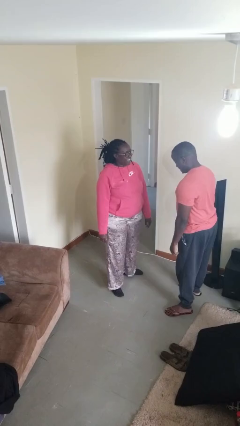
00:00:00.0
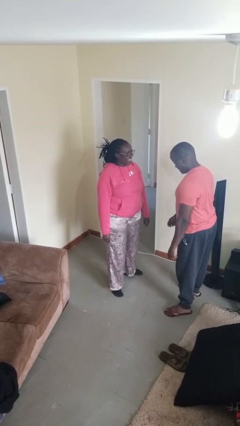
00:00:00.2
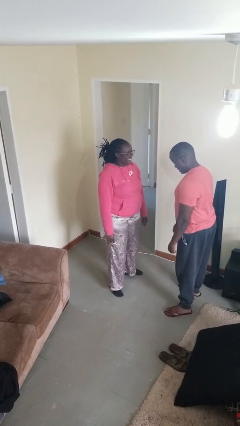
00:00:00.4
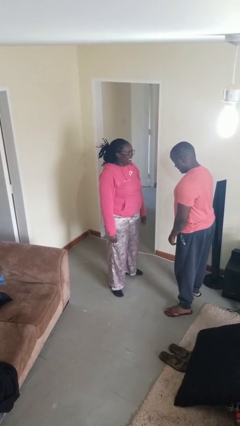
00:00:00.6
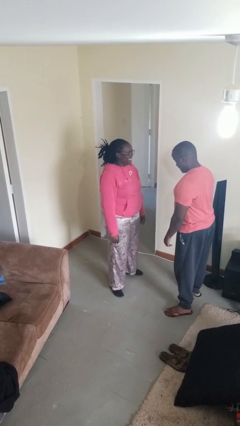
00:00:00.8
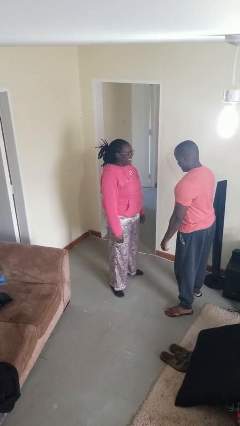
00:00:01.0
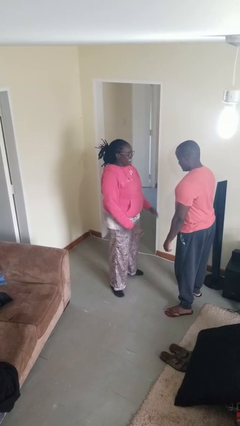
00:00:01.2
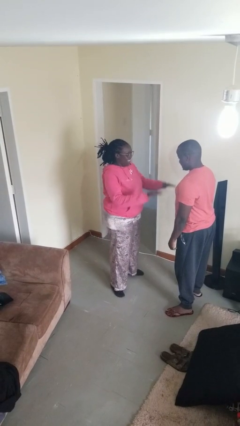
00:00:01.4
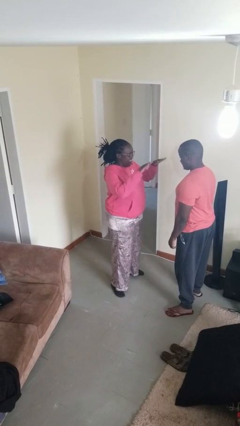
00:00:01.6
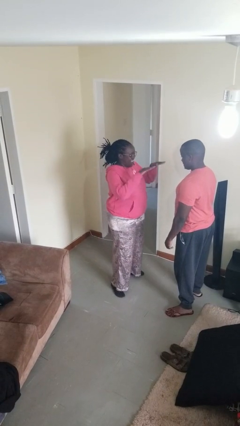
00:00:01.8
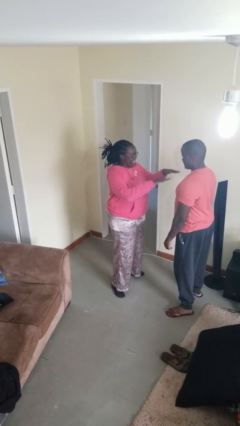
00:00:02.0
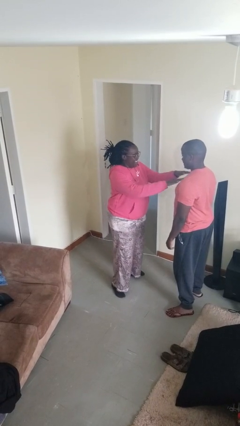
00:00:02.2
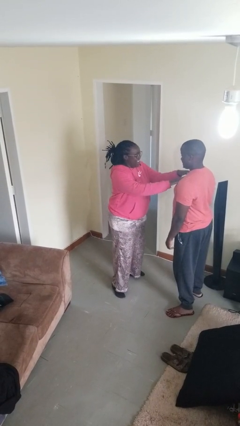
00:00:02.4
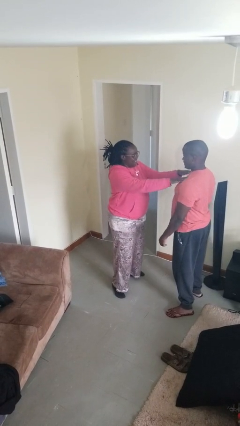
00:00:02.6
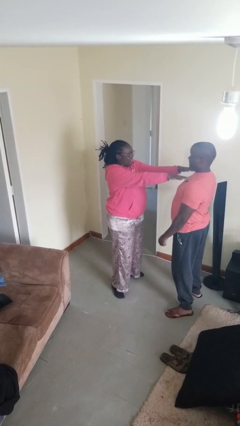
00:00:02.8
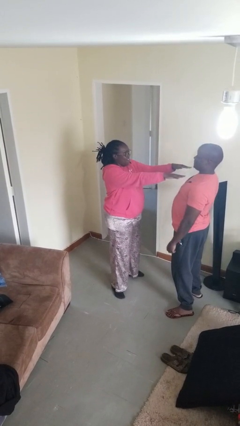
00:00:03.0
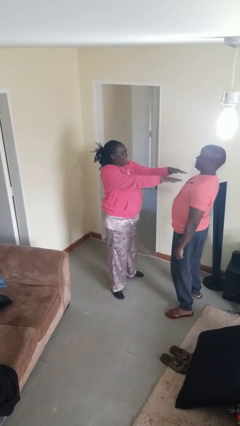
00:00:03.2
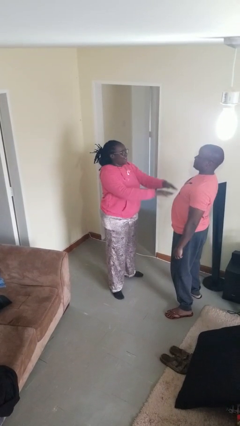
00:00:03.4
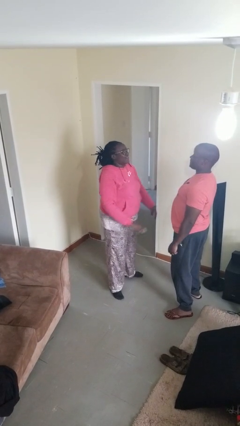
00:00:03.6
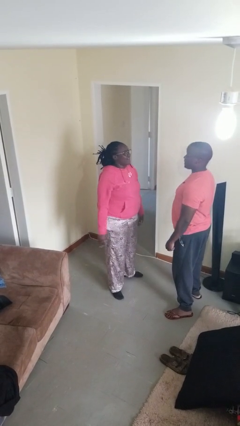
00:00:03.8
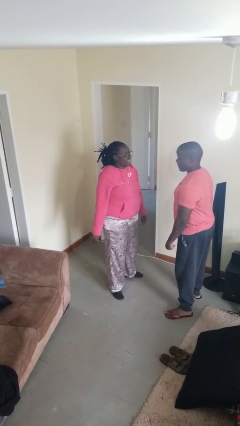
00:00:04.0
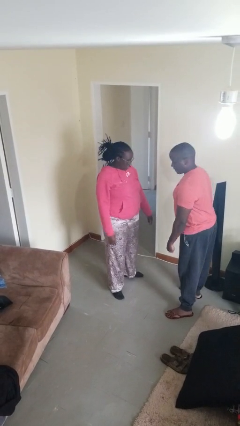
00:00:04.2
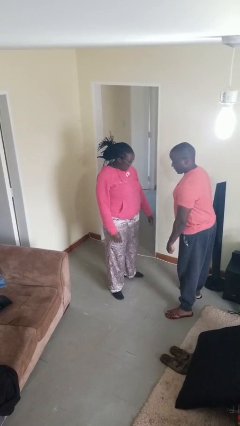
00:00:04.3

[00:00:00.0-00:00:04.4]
person shoves person

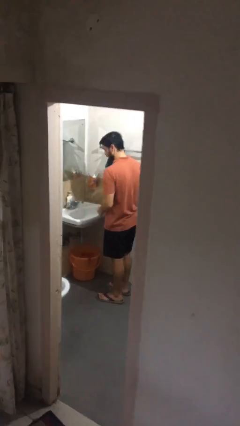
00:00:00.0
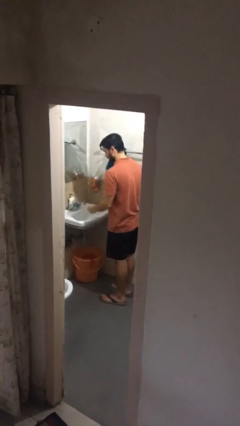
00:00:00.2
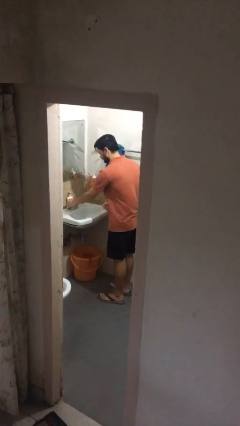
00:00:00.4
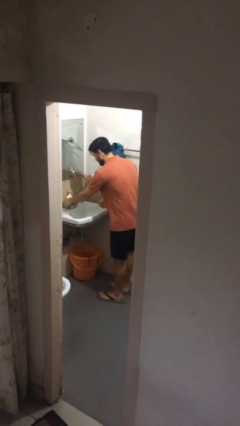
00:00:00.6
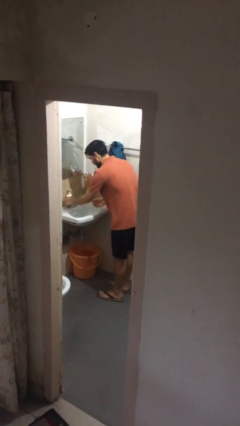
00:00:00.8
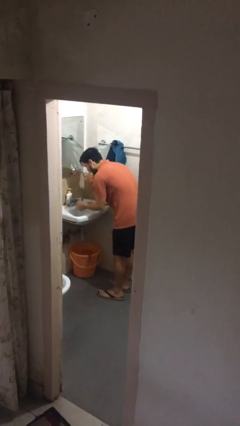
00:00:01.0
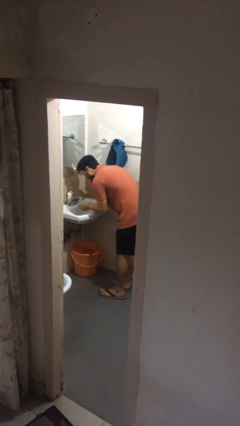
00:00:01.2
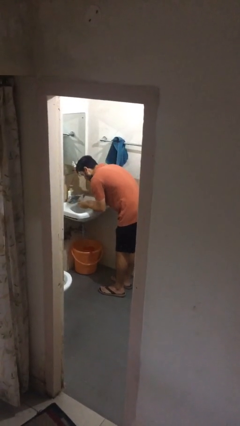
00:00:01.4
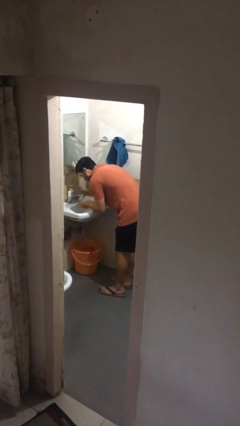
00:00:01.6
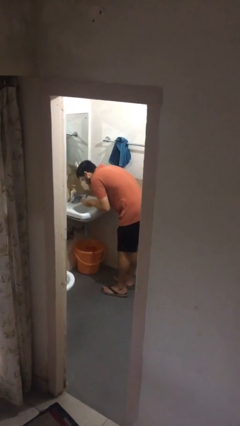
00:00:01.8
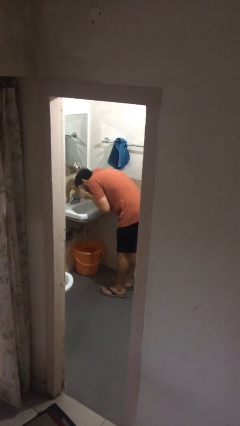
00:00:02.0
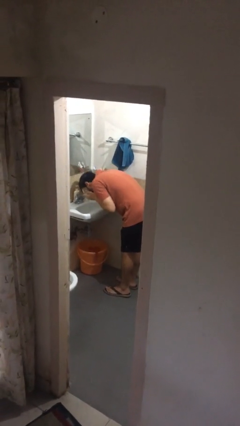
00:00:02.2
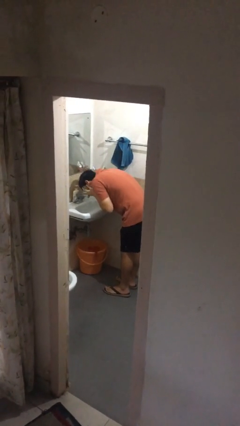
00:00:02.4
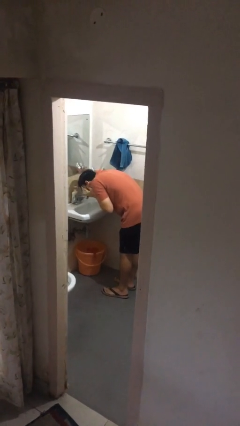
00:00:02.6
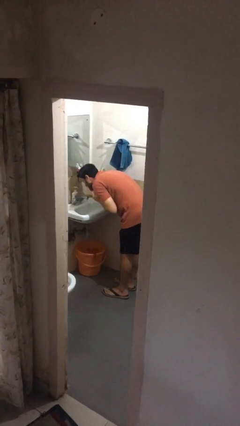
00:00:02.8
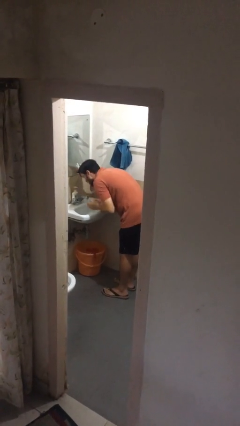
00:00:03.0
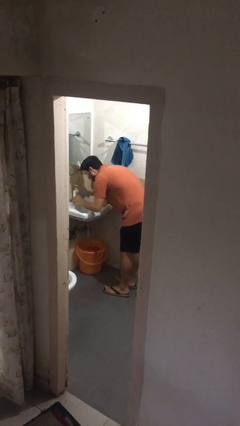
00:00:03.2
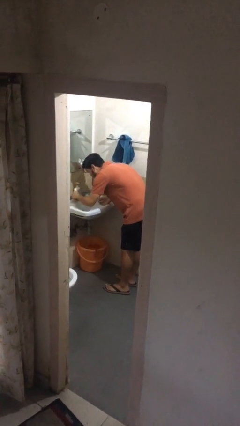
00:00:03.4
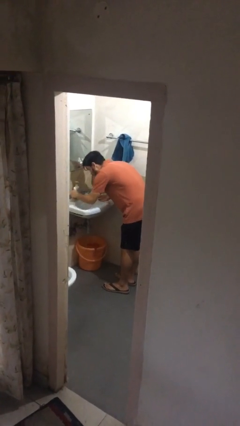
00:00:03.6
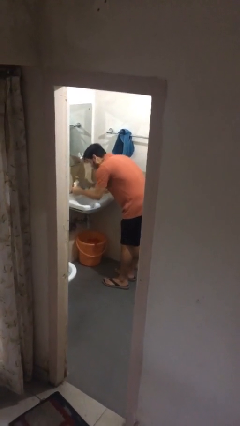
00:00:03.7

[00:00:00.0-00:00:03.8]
person washes face

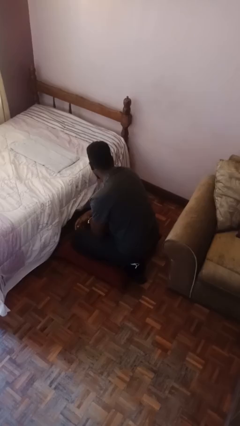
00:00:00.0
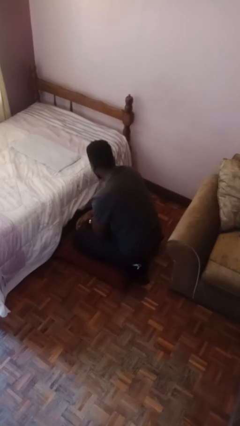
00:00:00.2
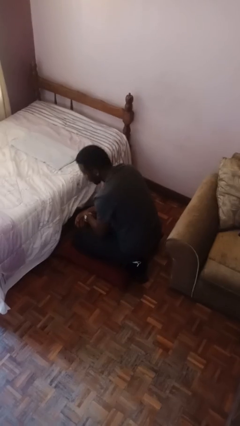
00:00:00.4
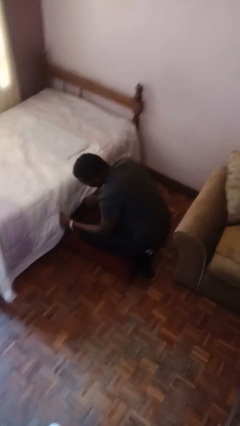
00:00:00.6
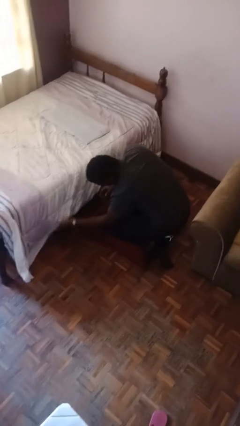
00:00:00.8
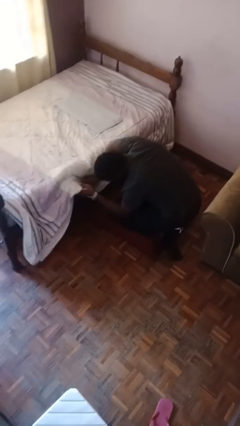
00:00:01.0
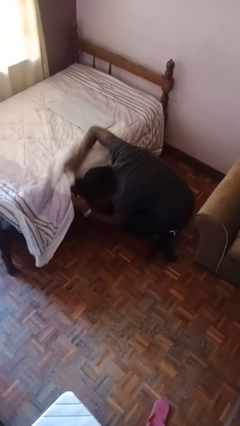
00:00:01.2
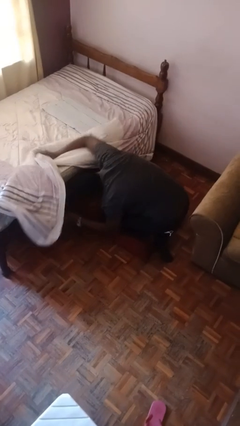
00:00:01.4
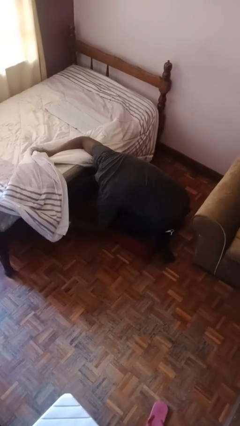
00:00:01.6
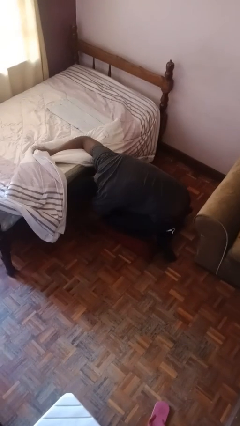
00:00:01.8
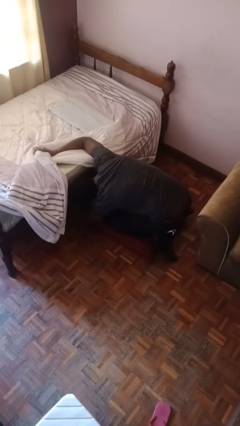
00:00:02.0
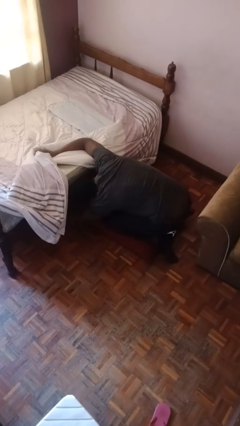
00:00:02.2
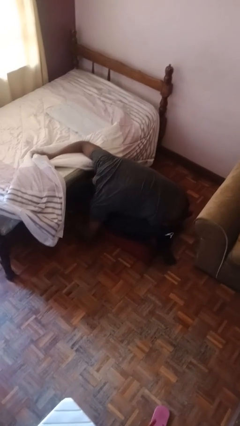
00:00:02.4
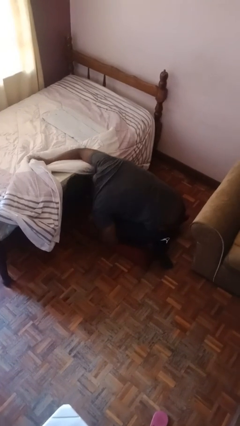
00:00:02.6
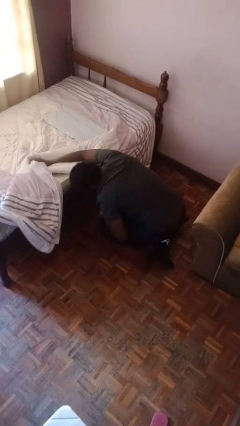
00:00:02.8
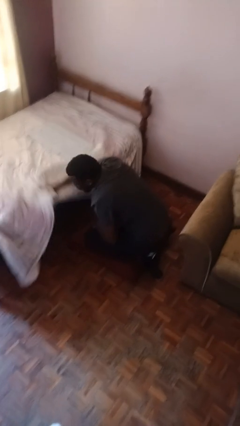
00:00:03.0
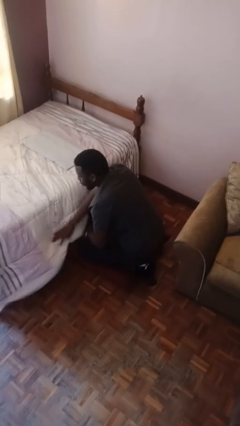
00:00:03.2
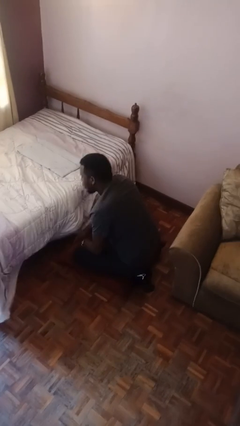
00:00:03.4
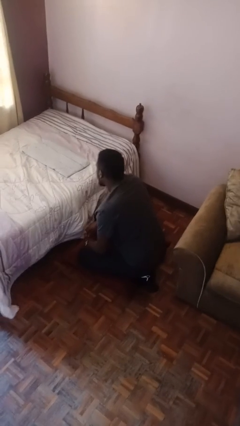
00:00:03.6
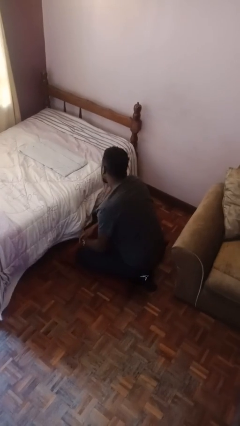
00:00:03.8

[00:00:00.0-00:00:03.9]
person searches under bed

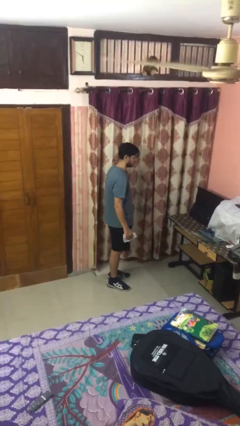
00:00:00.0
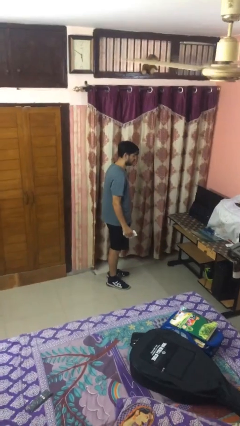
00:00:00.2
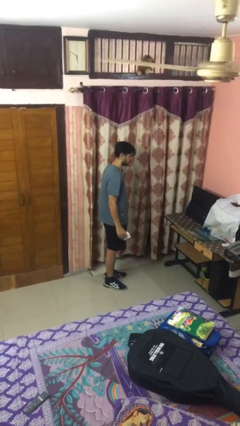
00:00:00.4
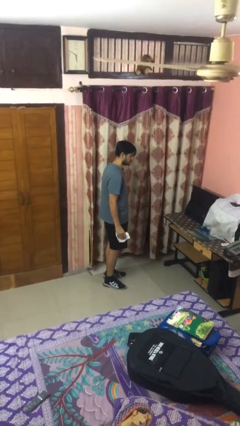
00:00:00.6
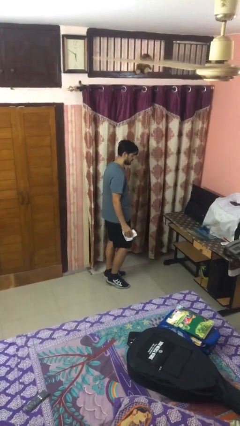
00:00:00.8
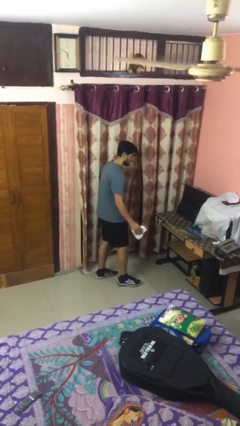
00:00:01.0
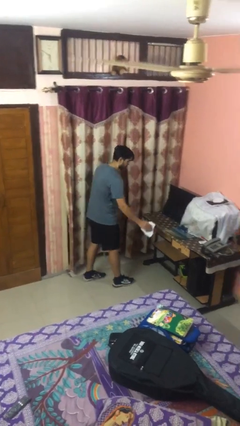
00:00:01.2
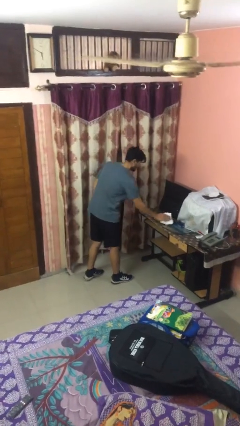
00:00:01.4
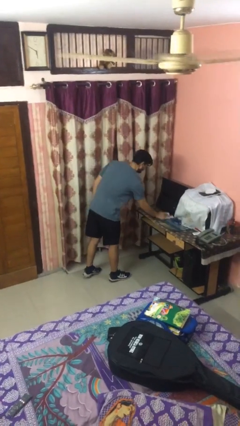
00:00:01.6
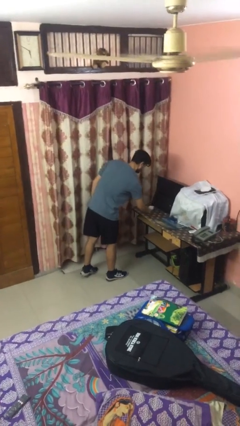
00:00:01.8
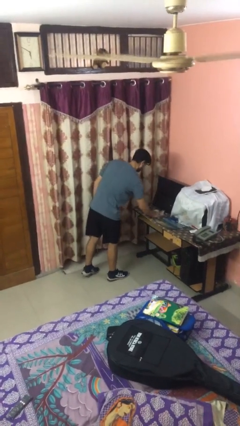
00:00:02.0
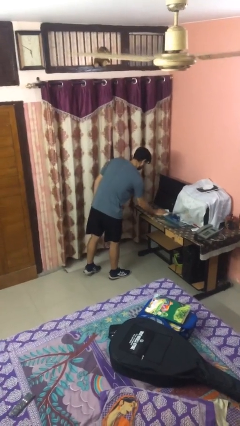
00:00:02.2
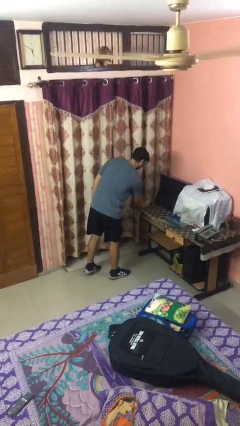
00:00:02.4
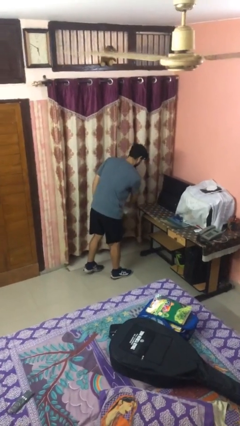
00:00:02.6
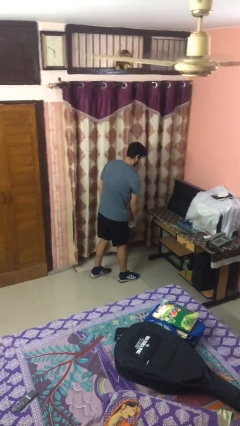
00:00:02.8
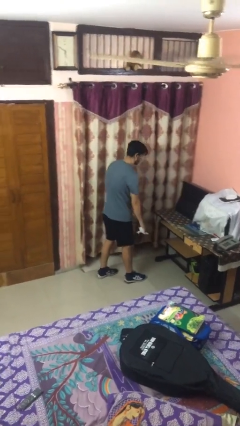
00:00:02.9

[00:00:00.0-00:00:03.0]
person cleans table with rag

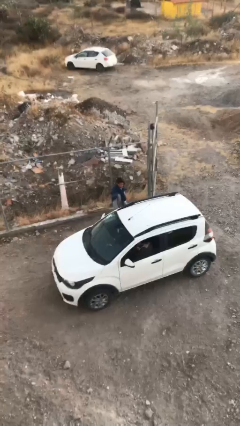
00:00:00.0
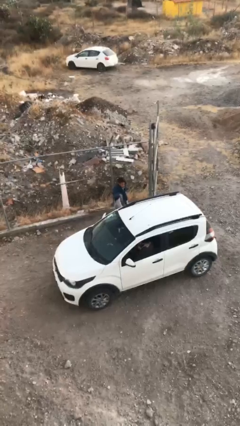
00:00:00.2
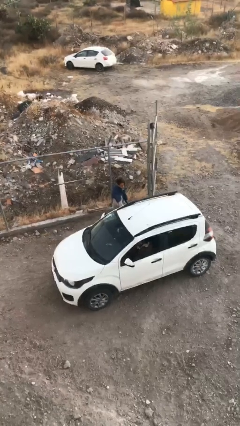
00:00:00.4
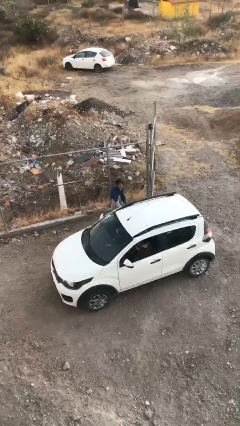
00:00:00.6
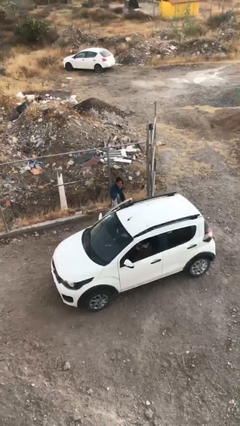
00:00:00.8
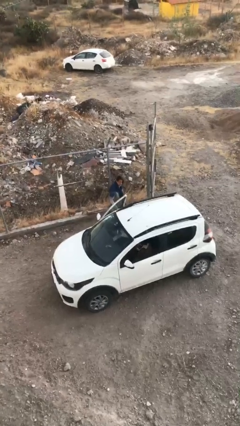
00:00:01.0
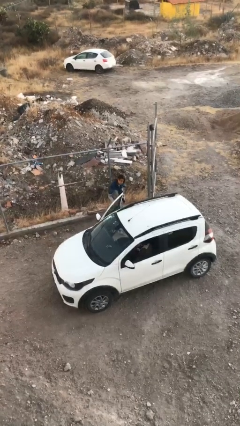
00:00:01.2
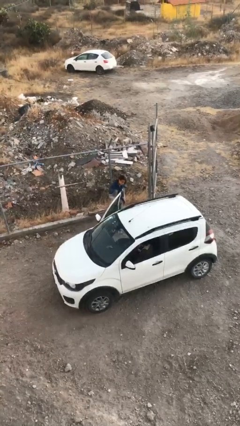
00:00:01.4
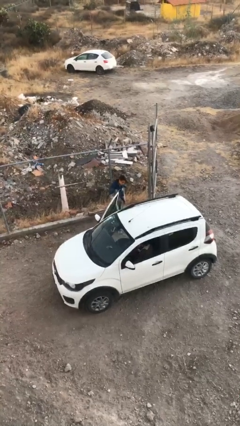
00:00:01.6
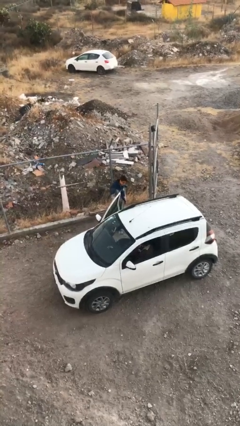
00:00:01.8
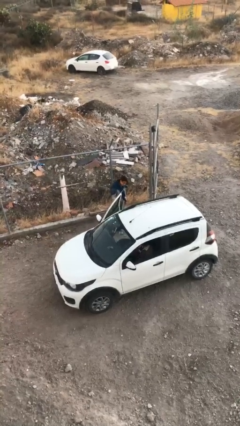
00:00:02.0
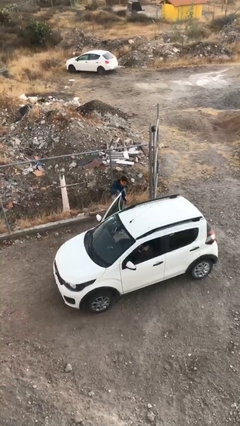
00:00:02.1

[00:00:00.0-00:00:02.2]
person opens car door
